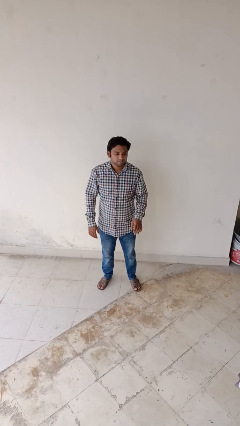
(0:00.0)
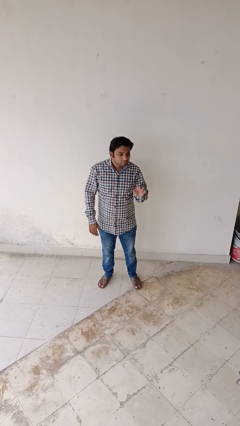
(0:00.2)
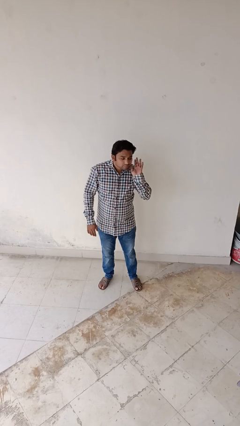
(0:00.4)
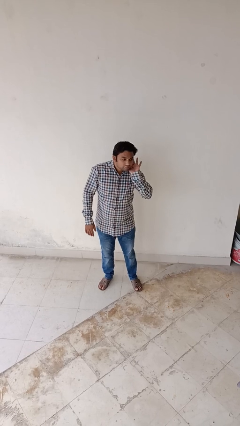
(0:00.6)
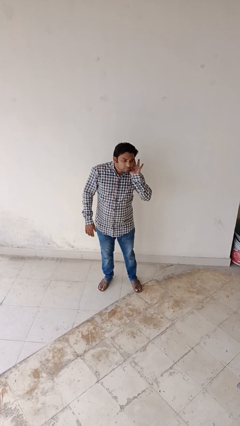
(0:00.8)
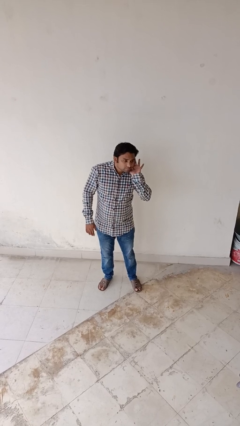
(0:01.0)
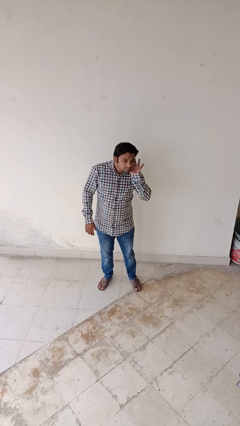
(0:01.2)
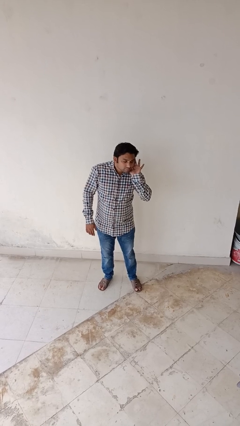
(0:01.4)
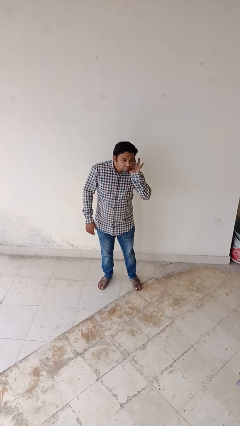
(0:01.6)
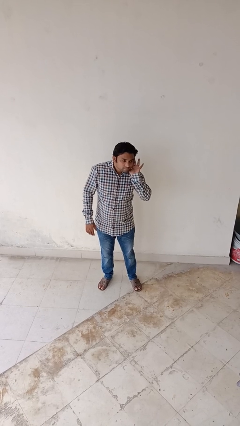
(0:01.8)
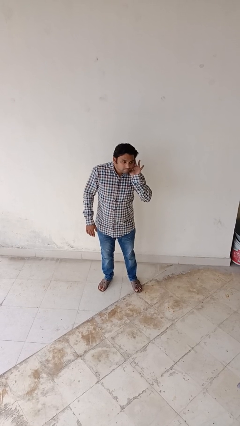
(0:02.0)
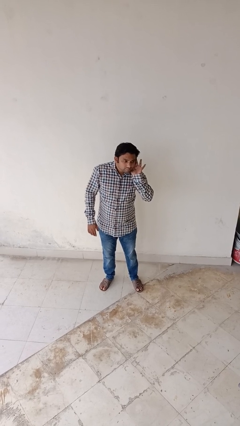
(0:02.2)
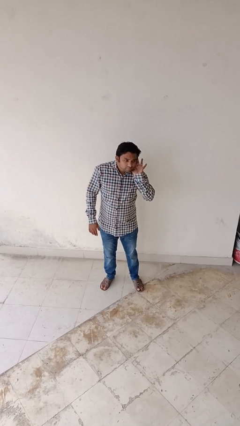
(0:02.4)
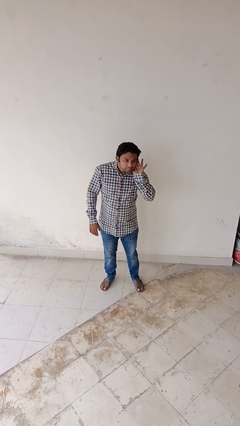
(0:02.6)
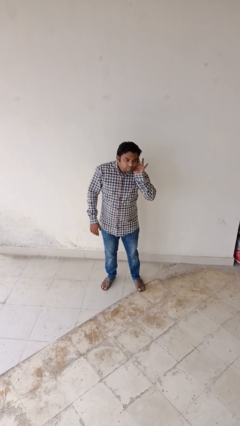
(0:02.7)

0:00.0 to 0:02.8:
person gestures listen closely

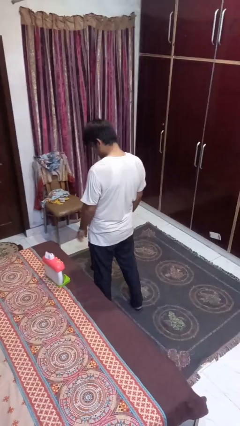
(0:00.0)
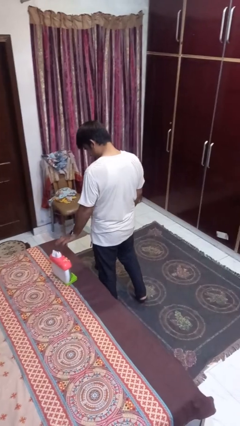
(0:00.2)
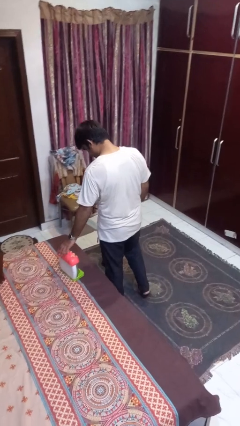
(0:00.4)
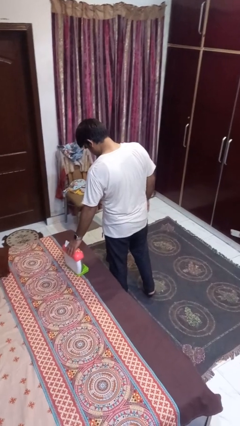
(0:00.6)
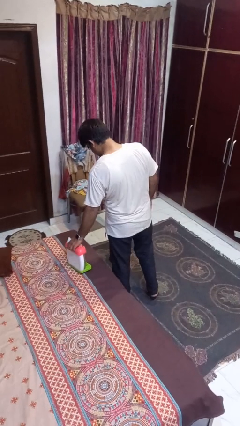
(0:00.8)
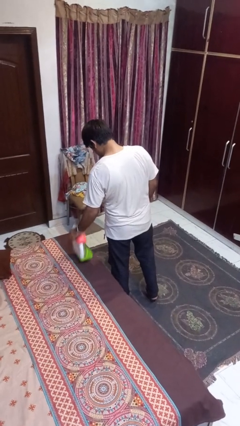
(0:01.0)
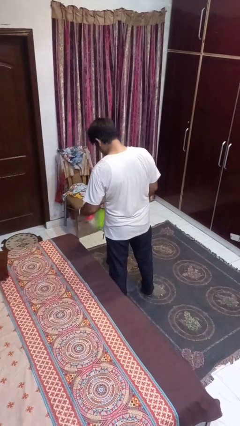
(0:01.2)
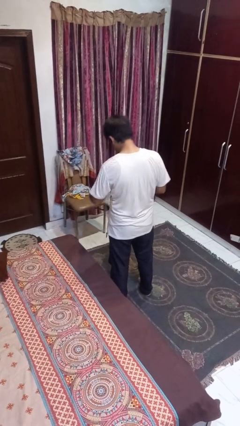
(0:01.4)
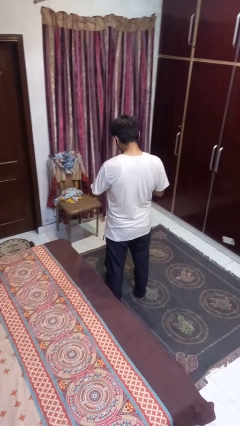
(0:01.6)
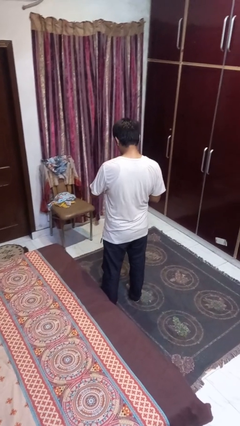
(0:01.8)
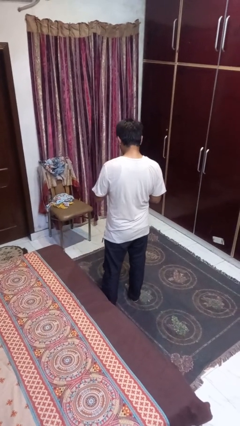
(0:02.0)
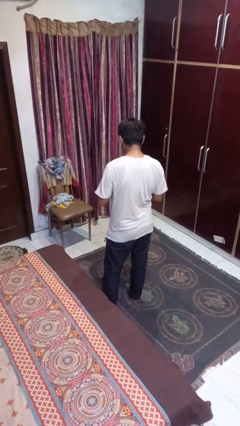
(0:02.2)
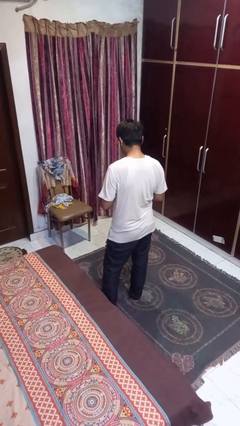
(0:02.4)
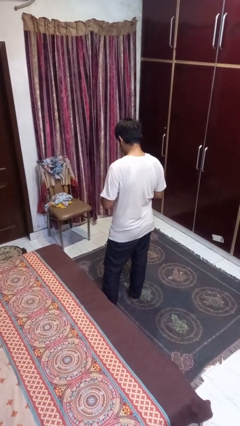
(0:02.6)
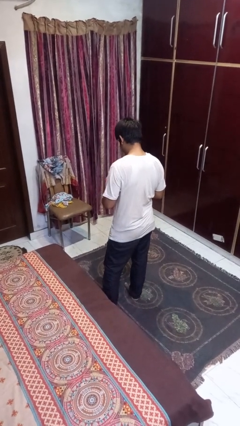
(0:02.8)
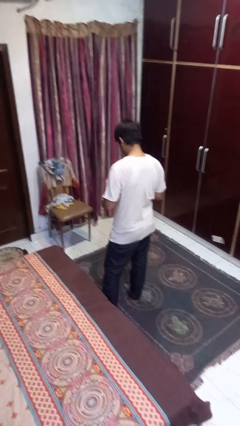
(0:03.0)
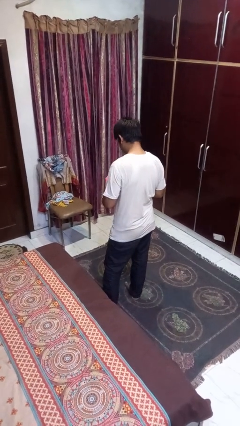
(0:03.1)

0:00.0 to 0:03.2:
person picks up object from bed

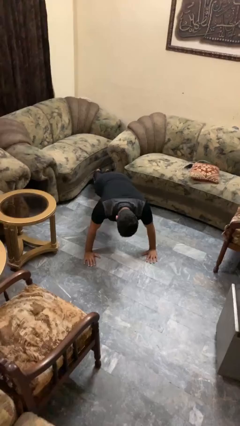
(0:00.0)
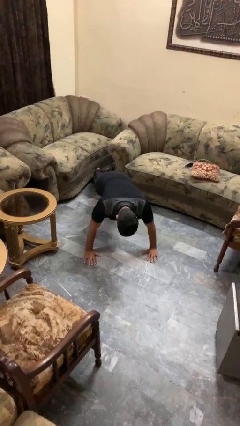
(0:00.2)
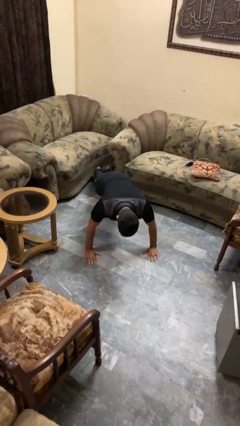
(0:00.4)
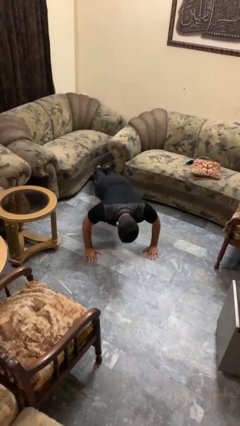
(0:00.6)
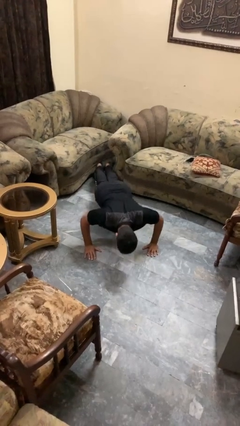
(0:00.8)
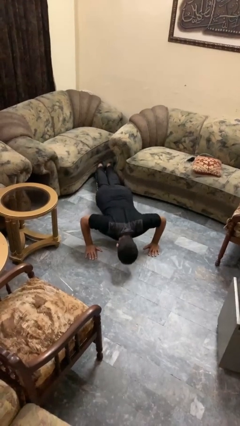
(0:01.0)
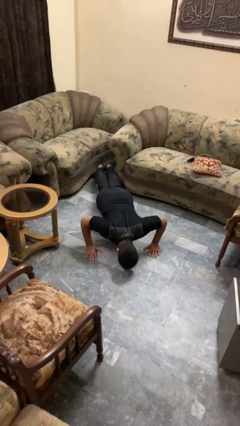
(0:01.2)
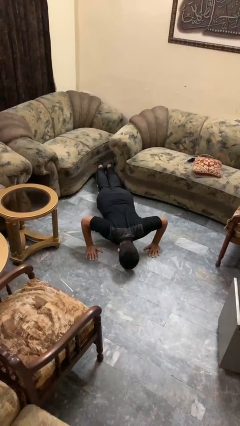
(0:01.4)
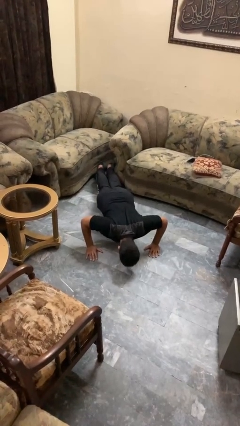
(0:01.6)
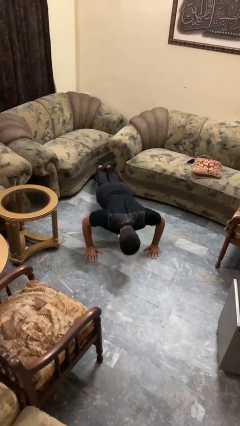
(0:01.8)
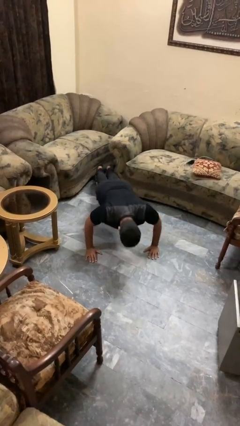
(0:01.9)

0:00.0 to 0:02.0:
person exercises with pushup

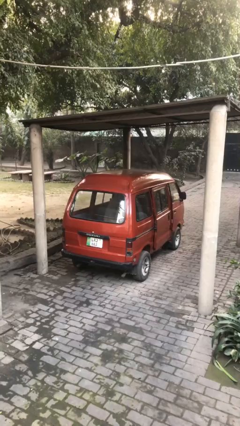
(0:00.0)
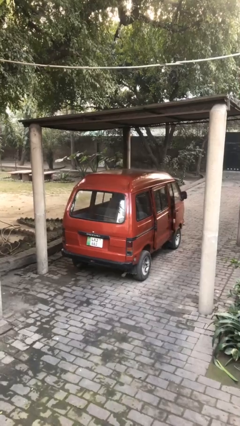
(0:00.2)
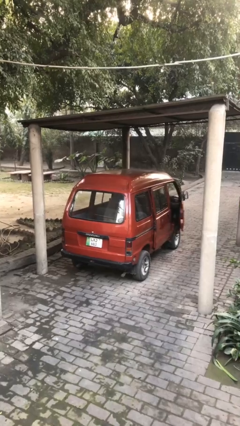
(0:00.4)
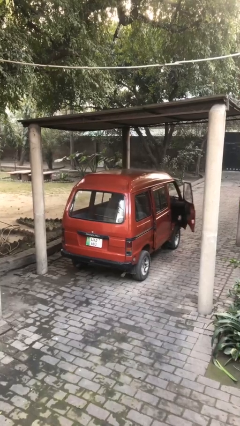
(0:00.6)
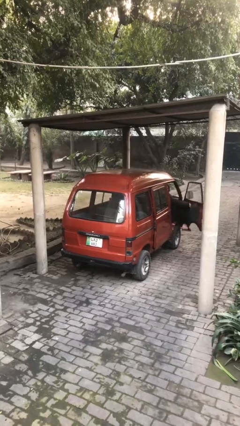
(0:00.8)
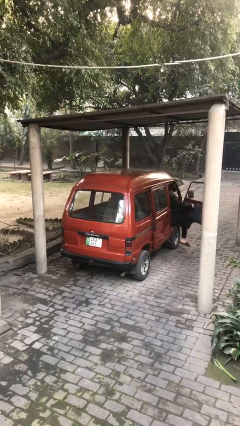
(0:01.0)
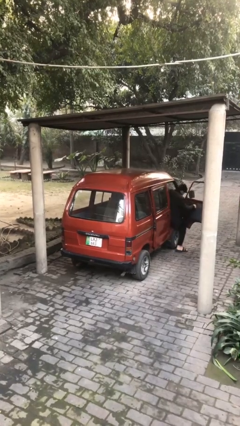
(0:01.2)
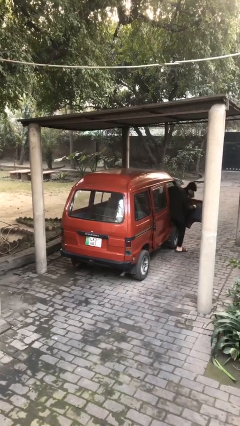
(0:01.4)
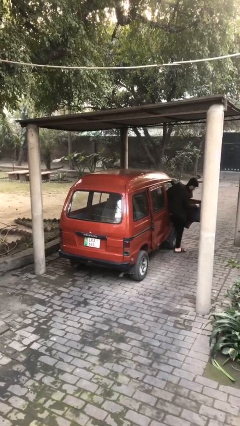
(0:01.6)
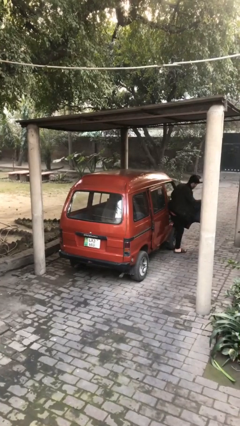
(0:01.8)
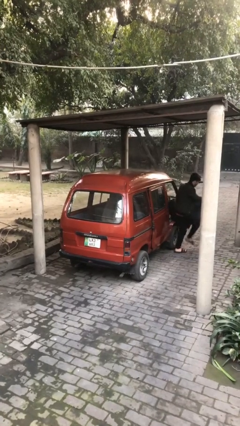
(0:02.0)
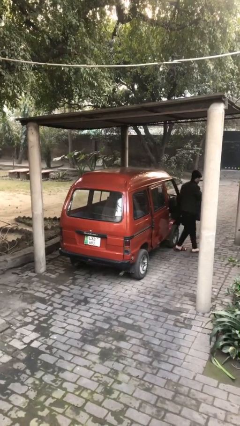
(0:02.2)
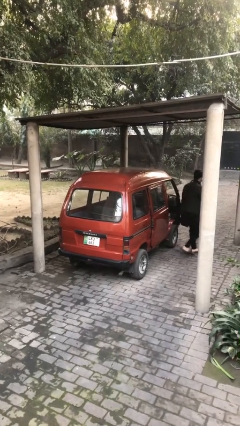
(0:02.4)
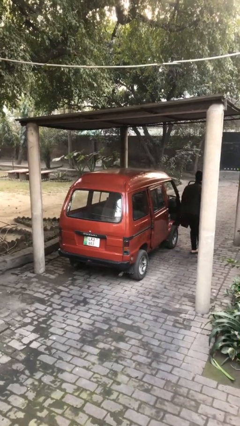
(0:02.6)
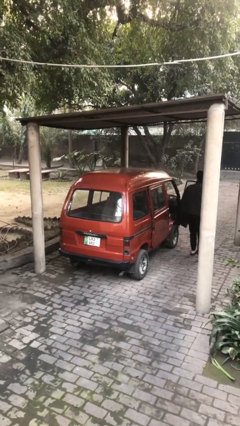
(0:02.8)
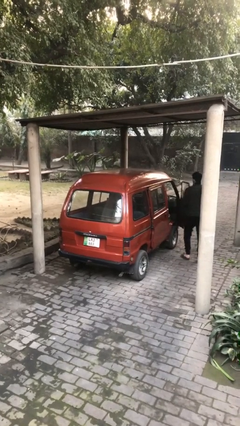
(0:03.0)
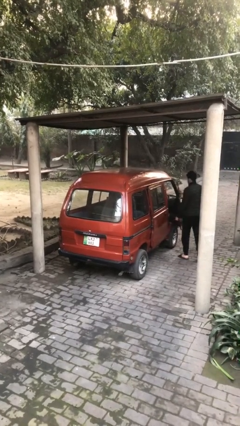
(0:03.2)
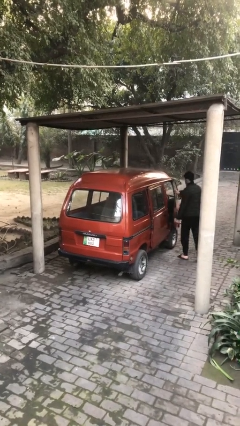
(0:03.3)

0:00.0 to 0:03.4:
car drops off person

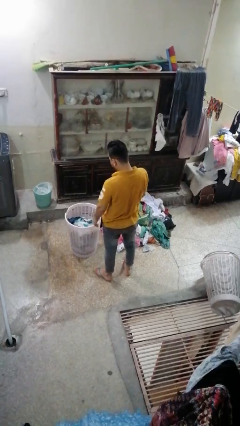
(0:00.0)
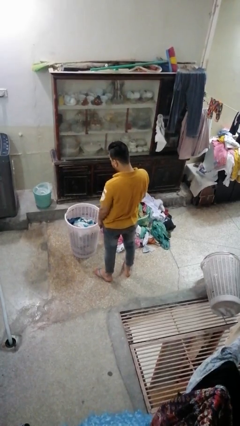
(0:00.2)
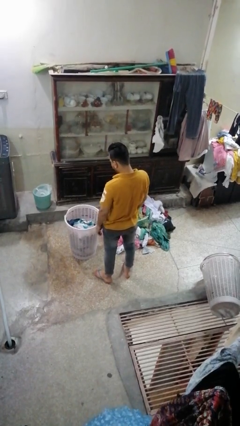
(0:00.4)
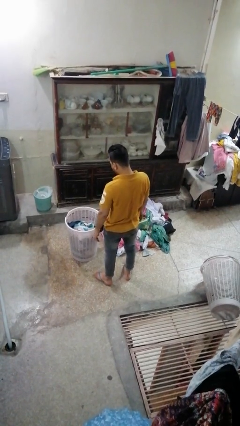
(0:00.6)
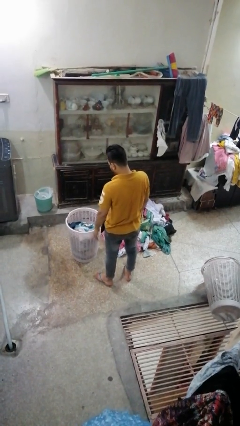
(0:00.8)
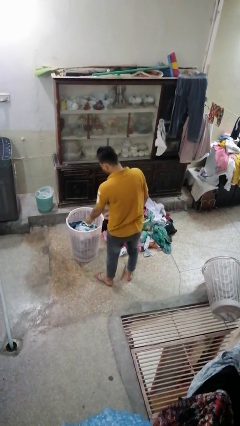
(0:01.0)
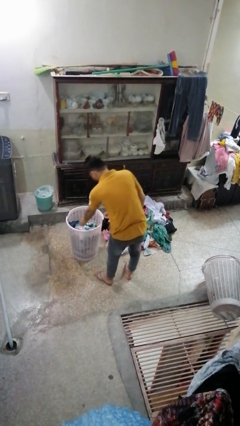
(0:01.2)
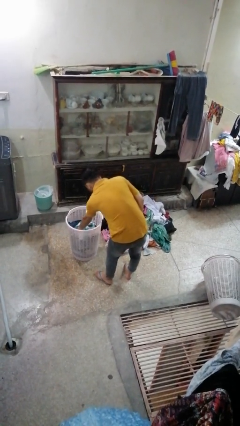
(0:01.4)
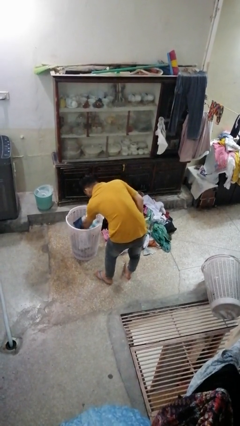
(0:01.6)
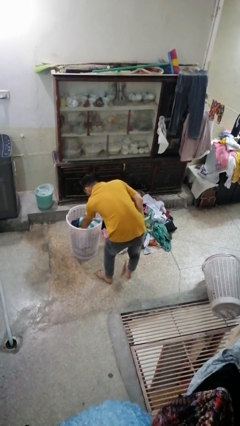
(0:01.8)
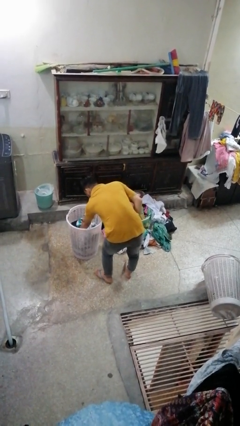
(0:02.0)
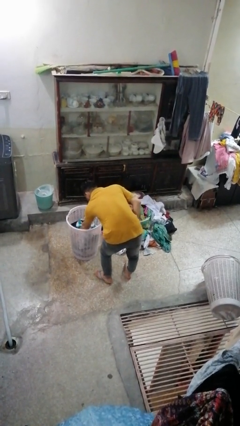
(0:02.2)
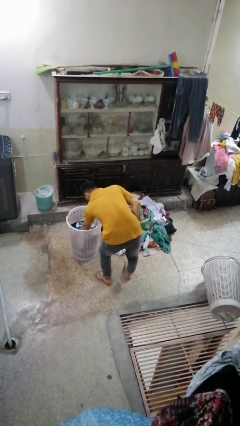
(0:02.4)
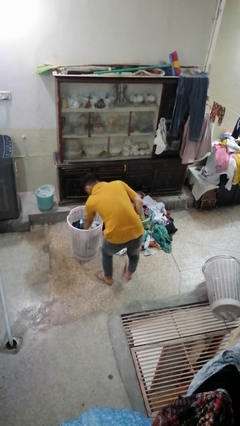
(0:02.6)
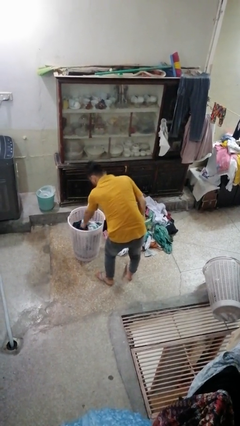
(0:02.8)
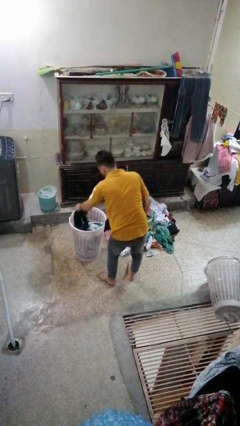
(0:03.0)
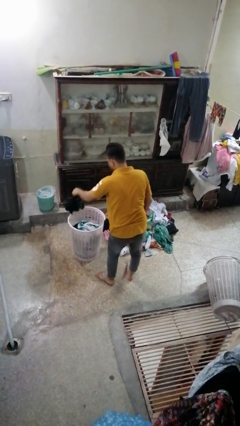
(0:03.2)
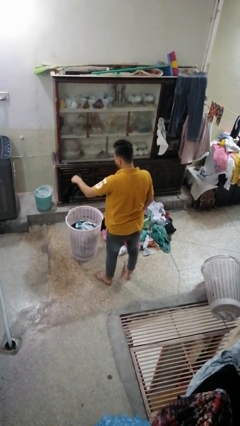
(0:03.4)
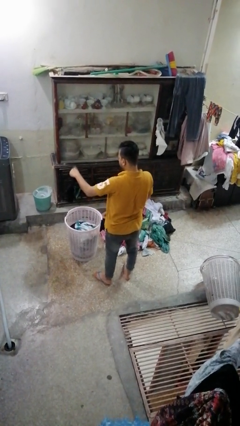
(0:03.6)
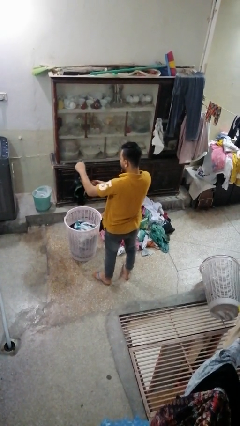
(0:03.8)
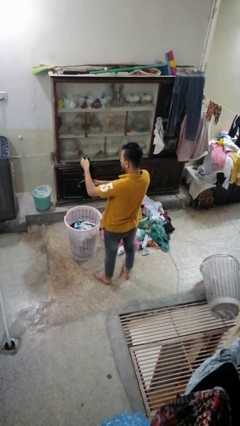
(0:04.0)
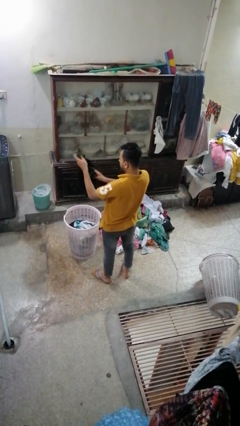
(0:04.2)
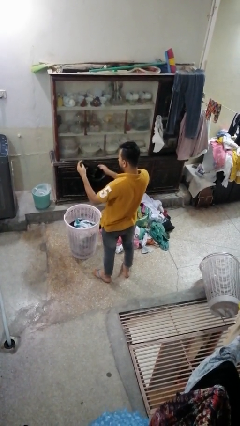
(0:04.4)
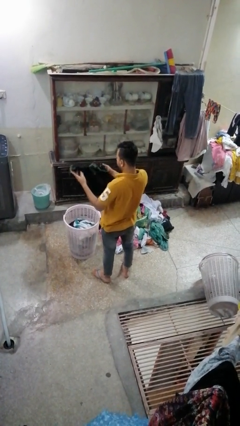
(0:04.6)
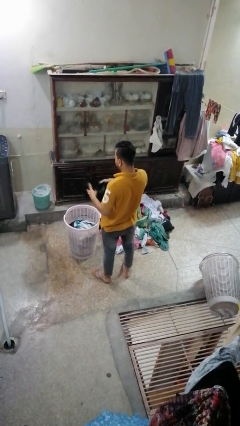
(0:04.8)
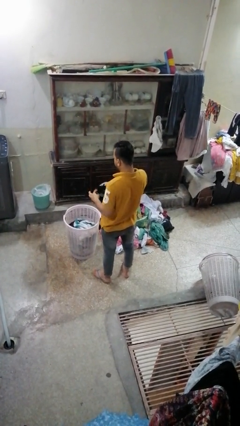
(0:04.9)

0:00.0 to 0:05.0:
person takes object from basket

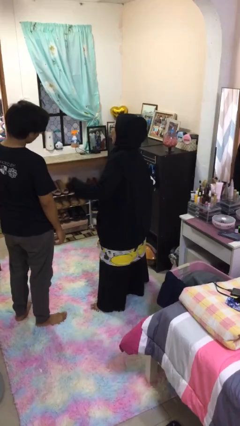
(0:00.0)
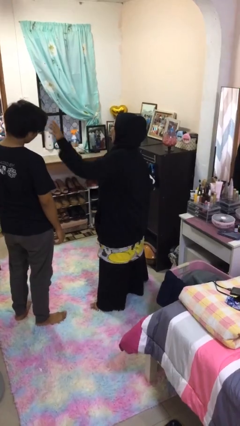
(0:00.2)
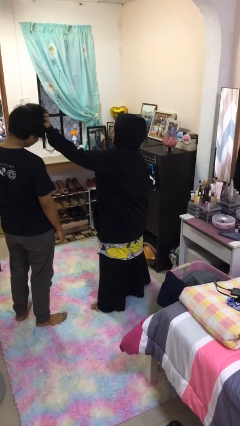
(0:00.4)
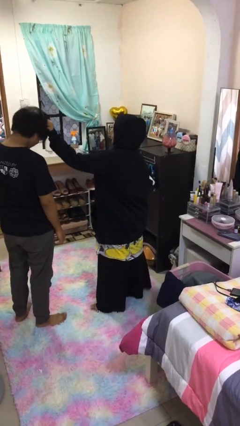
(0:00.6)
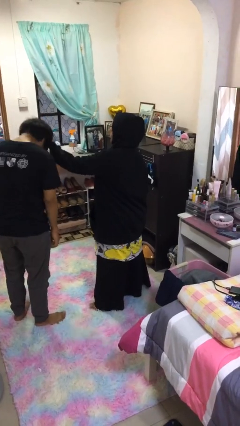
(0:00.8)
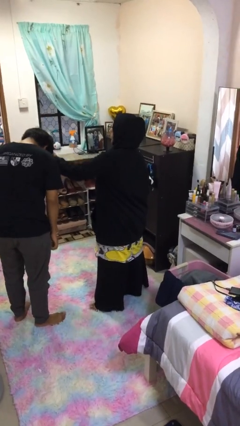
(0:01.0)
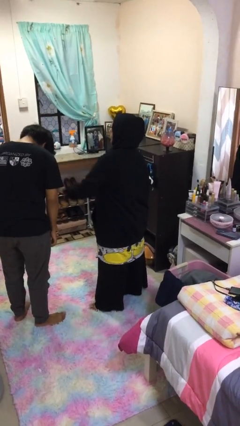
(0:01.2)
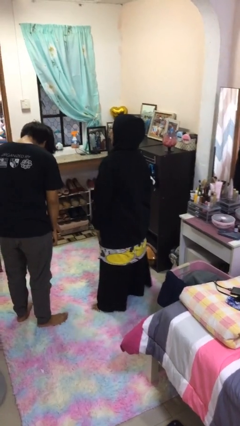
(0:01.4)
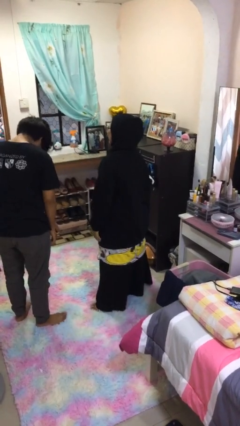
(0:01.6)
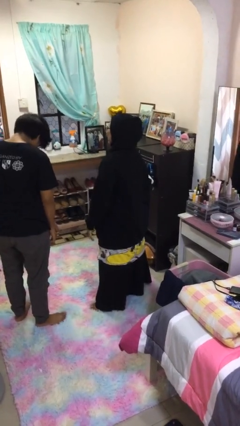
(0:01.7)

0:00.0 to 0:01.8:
person grabs person by hair
